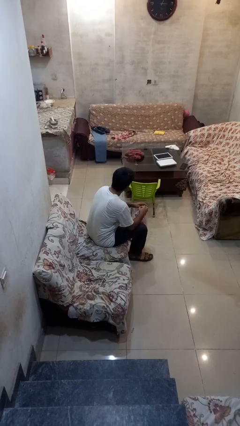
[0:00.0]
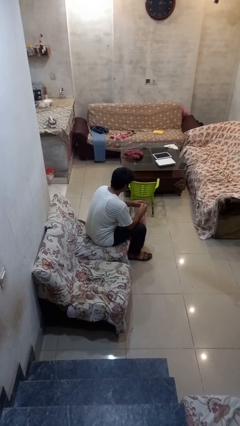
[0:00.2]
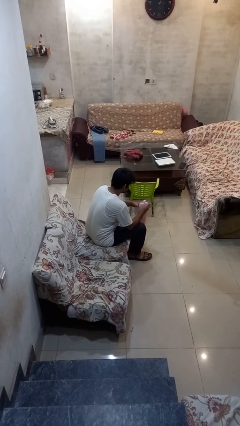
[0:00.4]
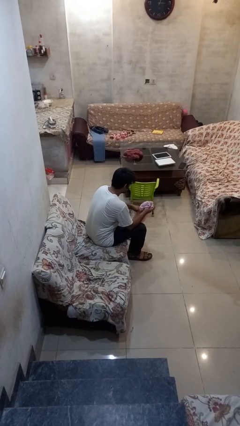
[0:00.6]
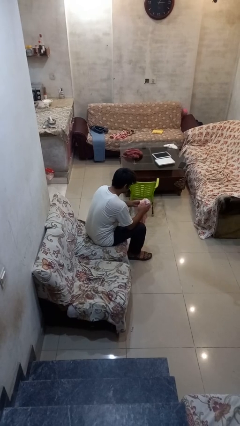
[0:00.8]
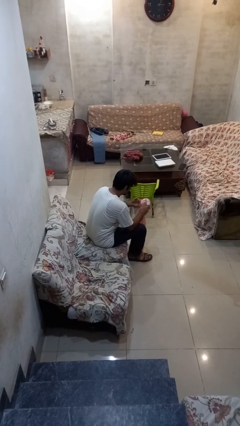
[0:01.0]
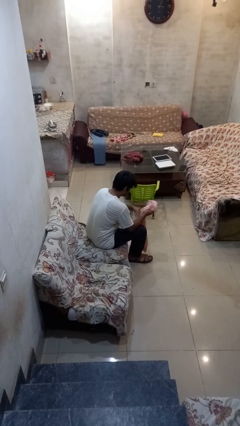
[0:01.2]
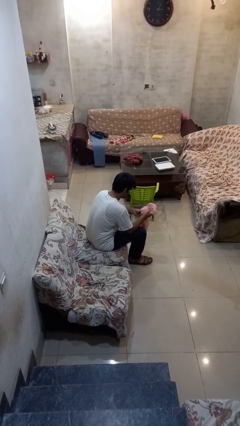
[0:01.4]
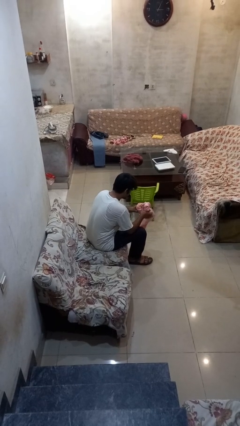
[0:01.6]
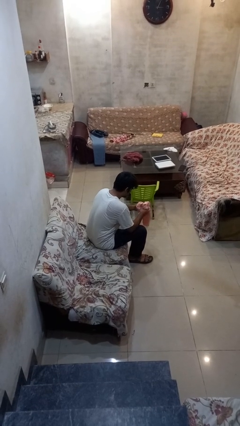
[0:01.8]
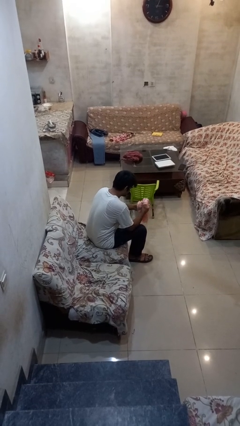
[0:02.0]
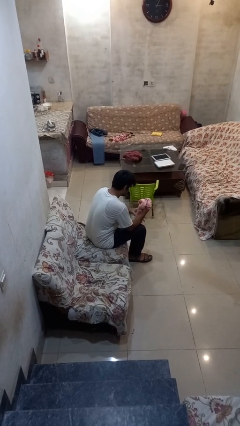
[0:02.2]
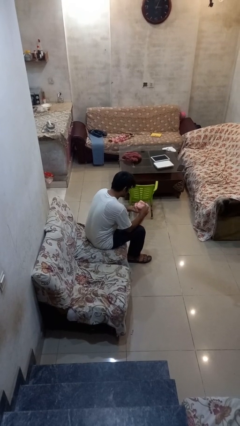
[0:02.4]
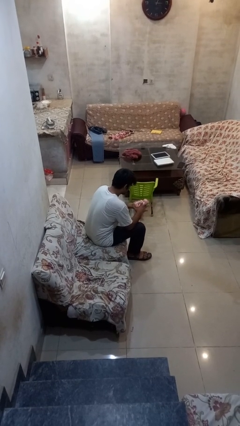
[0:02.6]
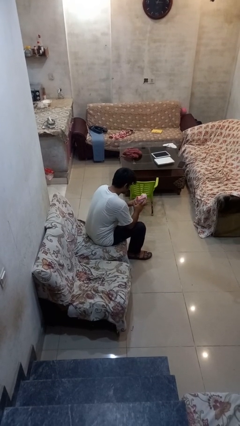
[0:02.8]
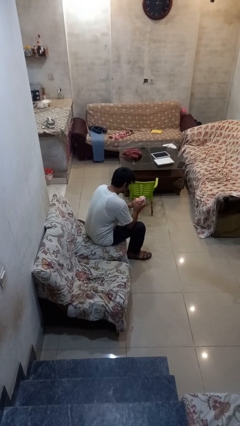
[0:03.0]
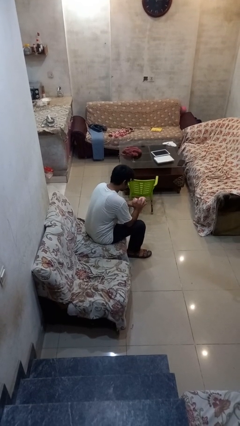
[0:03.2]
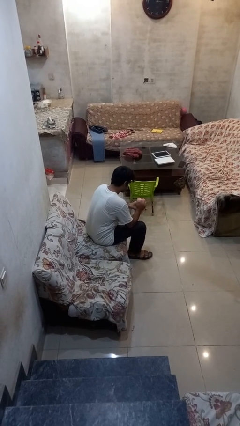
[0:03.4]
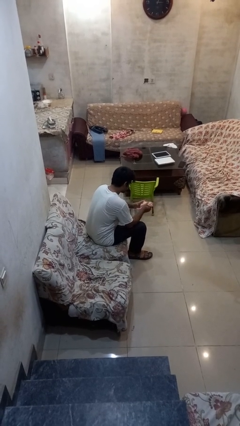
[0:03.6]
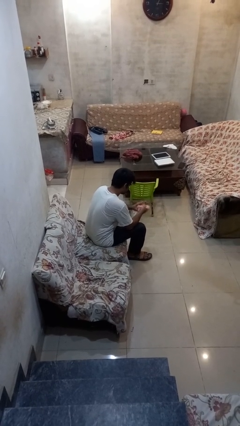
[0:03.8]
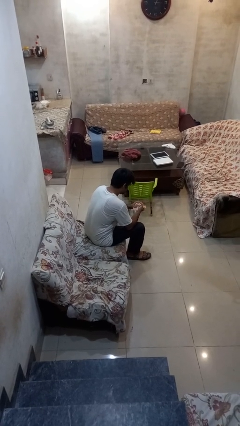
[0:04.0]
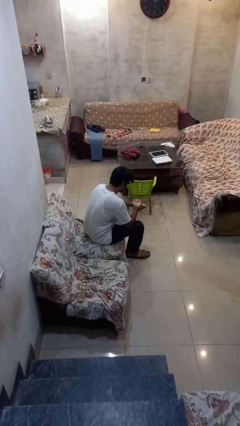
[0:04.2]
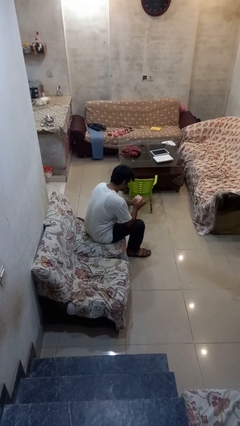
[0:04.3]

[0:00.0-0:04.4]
person squeezes object

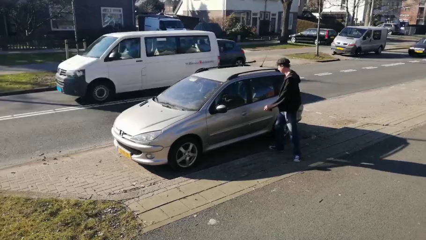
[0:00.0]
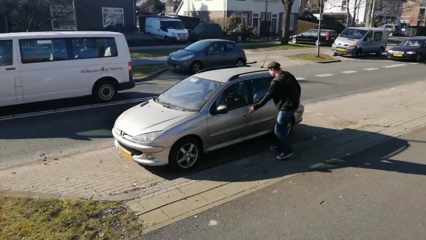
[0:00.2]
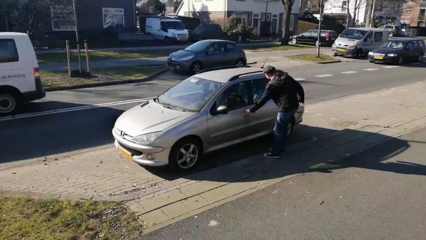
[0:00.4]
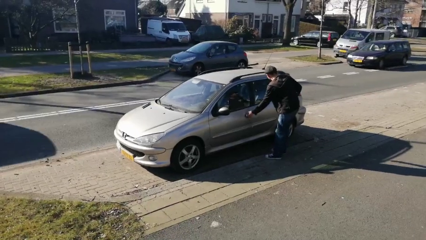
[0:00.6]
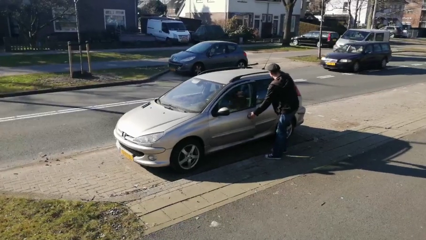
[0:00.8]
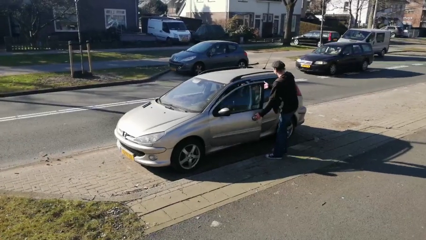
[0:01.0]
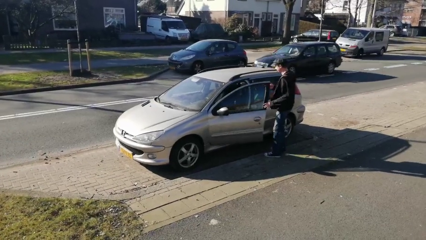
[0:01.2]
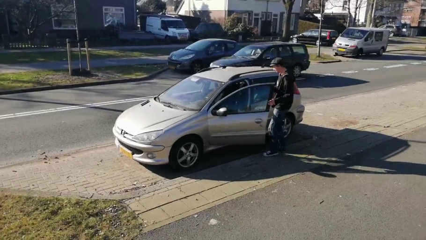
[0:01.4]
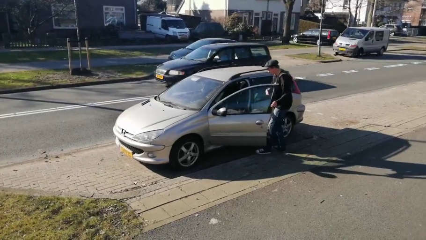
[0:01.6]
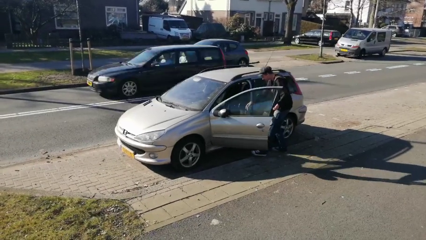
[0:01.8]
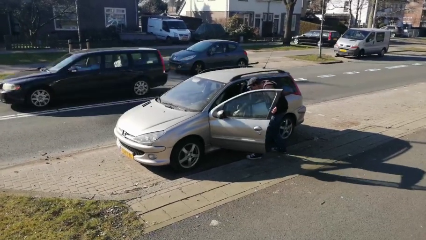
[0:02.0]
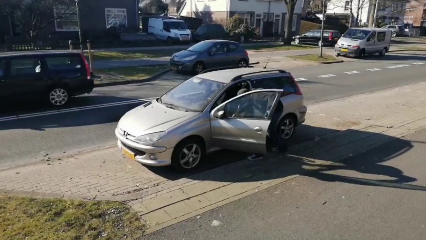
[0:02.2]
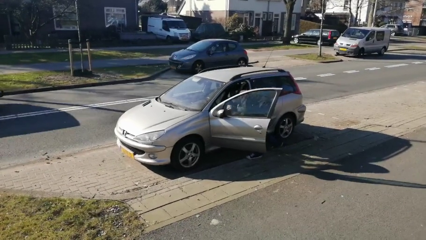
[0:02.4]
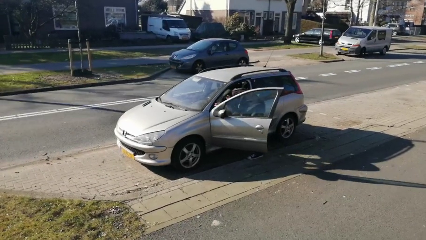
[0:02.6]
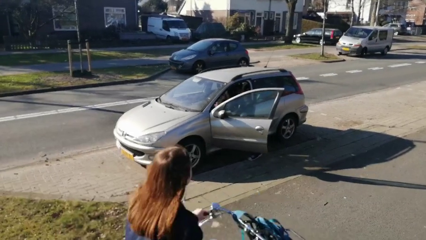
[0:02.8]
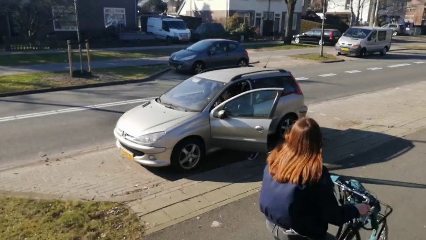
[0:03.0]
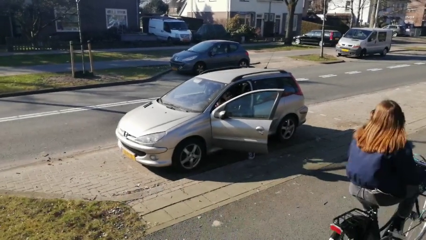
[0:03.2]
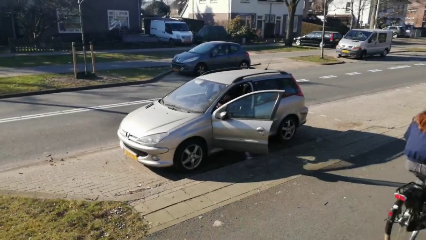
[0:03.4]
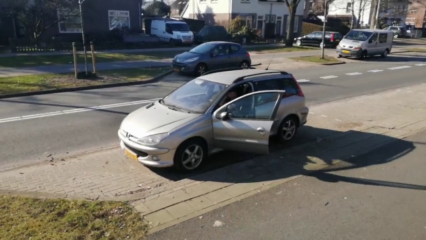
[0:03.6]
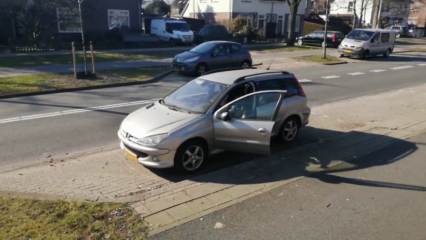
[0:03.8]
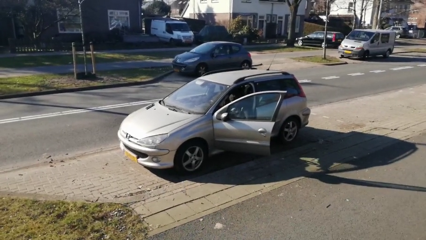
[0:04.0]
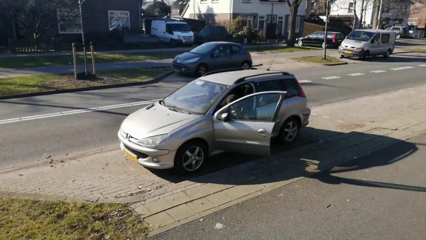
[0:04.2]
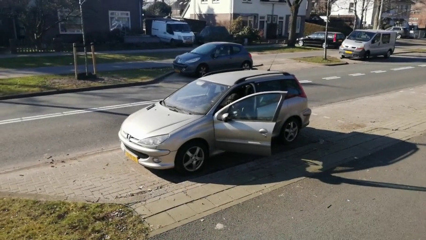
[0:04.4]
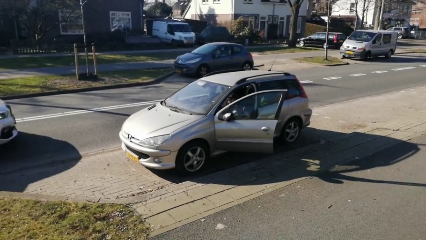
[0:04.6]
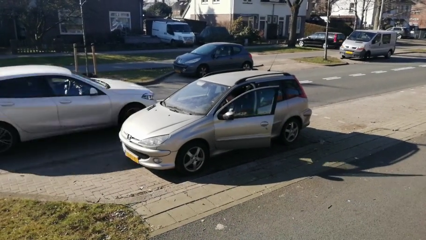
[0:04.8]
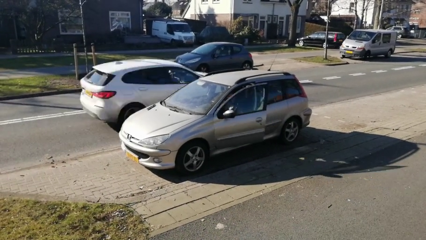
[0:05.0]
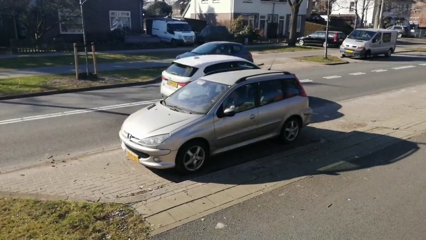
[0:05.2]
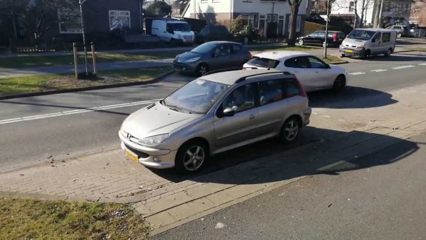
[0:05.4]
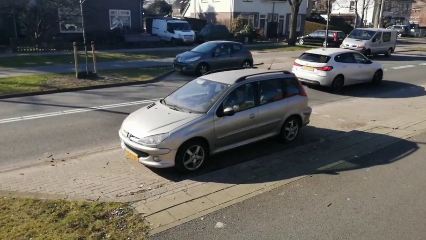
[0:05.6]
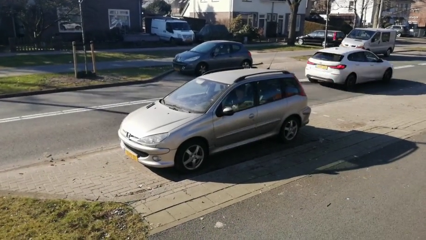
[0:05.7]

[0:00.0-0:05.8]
car picks up person

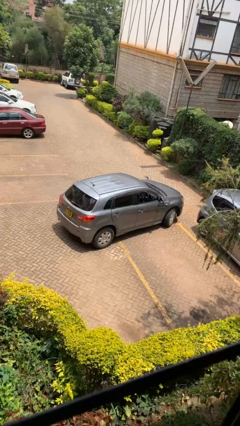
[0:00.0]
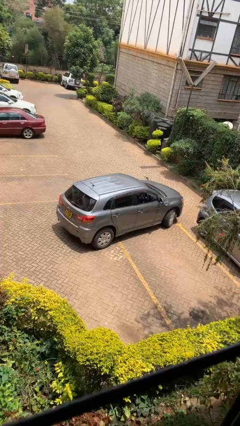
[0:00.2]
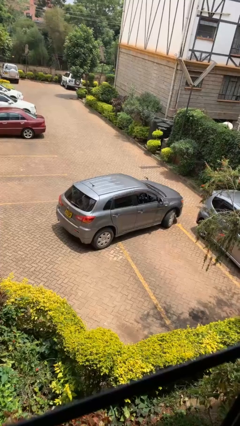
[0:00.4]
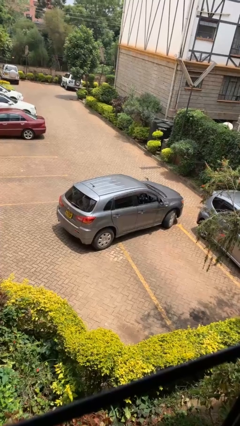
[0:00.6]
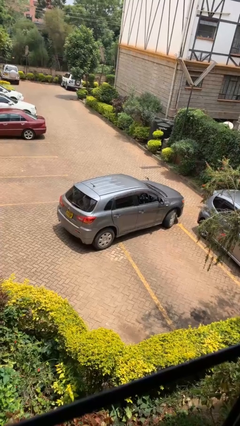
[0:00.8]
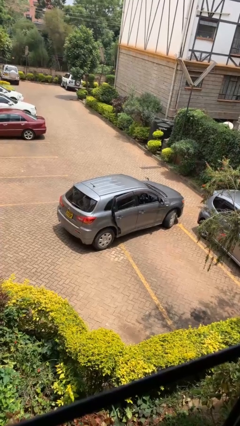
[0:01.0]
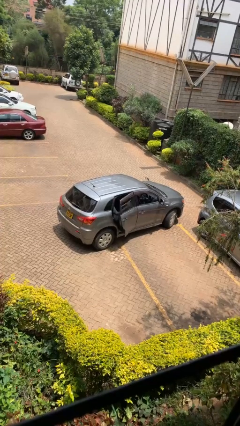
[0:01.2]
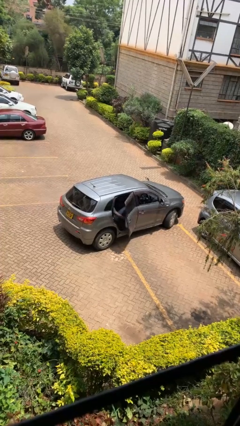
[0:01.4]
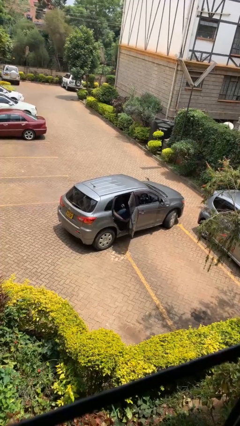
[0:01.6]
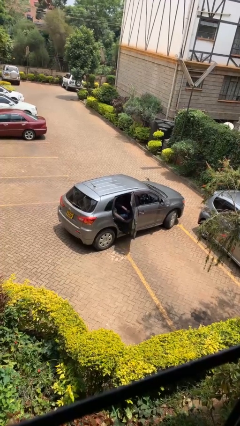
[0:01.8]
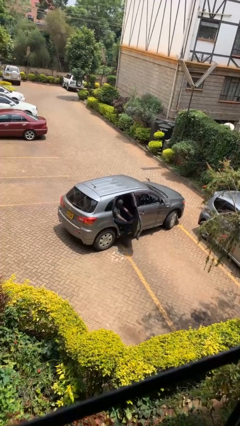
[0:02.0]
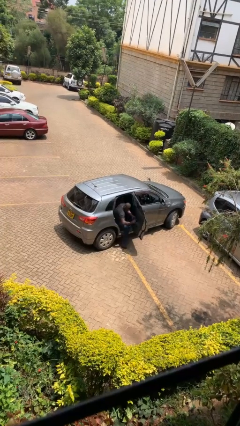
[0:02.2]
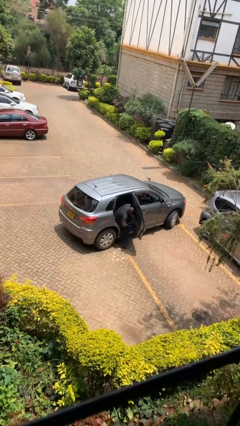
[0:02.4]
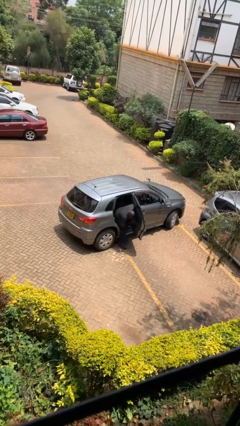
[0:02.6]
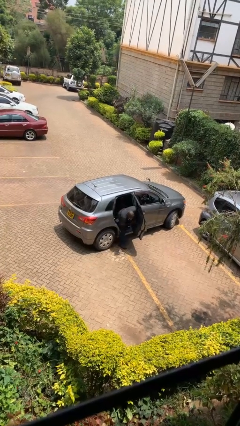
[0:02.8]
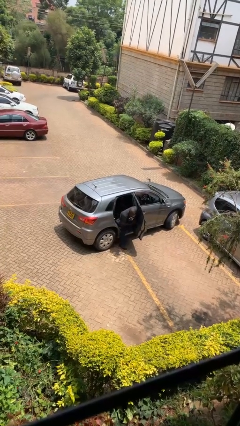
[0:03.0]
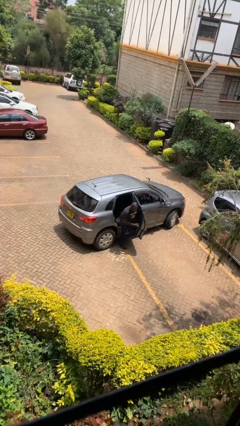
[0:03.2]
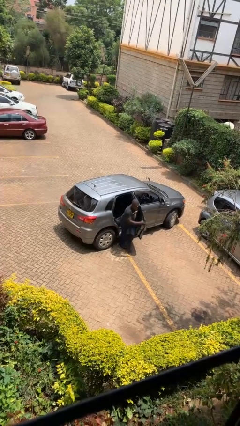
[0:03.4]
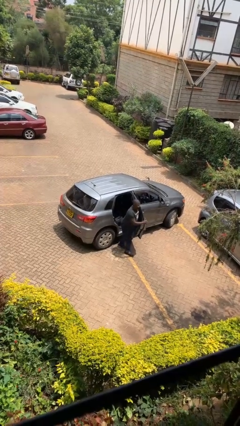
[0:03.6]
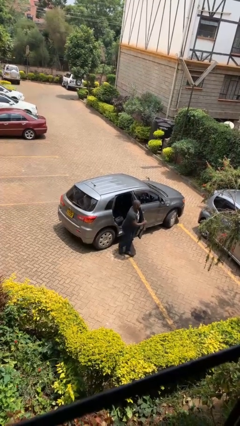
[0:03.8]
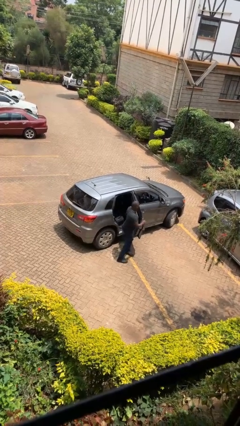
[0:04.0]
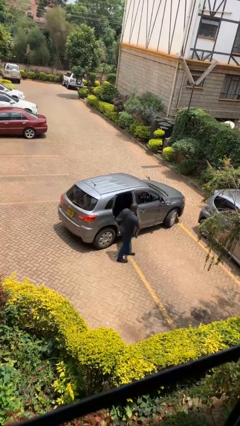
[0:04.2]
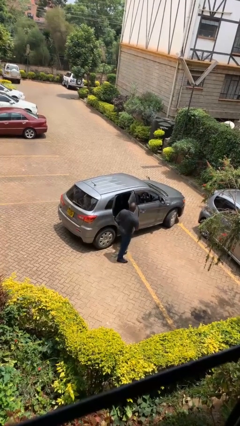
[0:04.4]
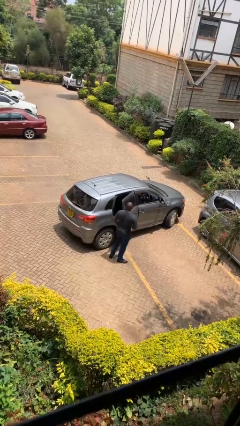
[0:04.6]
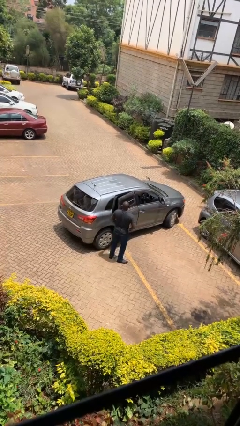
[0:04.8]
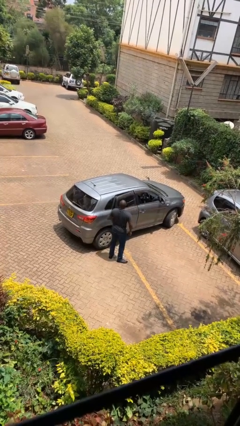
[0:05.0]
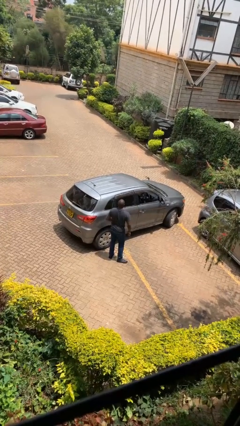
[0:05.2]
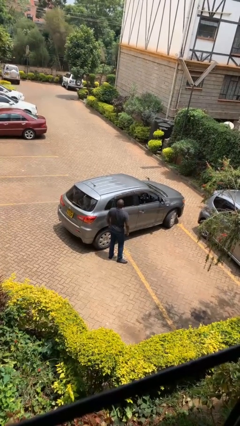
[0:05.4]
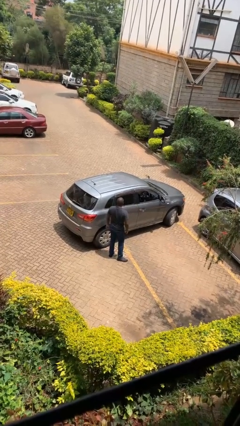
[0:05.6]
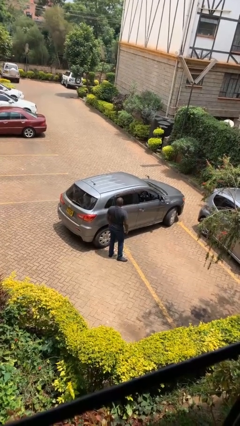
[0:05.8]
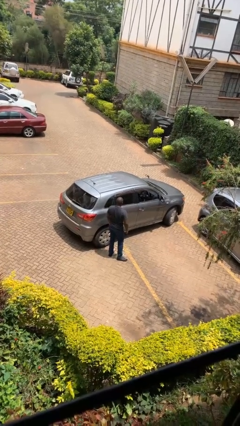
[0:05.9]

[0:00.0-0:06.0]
car drops off person

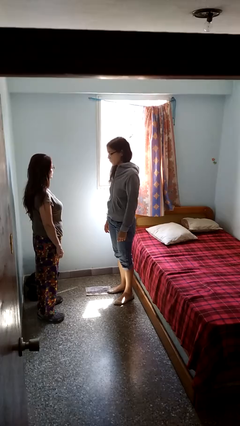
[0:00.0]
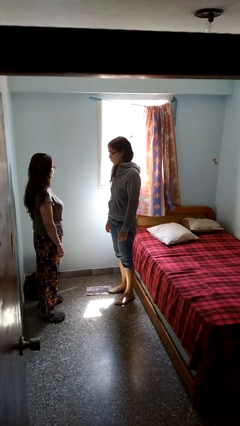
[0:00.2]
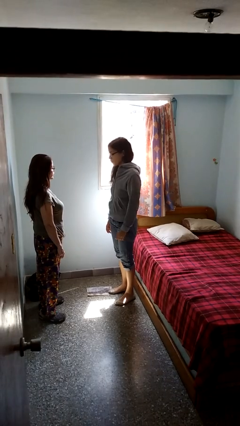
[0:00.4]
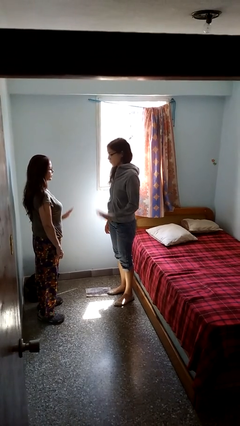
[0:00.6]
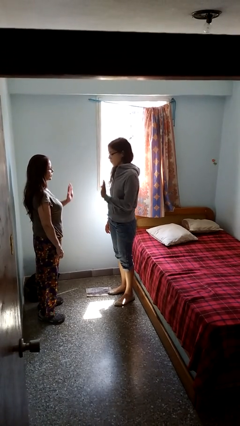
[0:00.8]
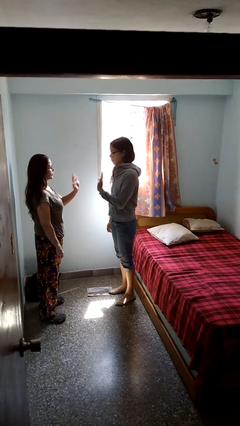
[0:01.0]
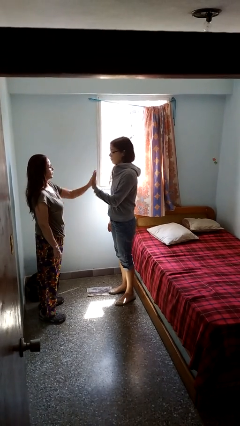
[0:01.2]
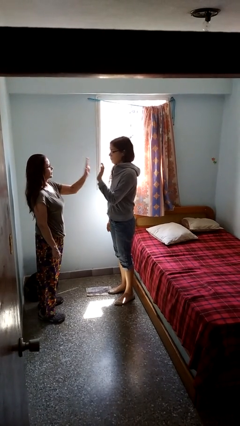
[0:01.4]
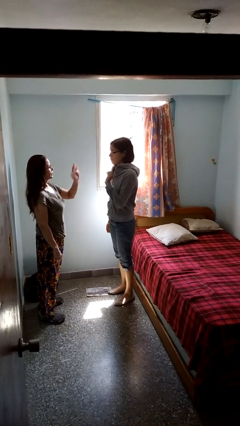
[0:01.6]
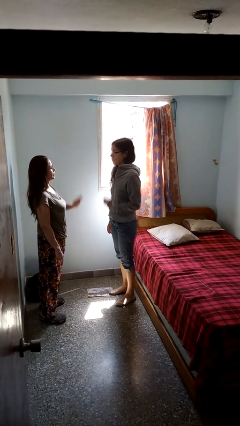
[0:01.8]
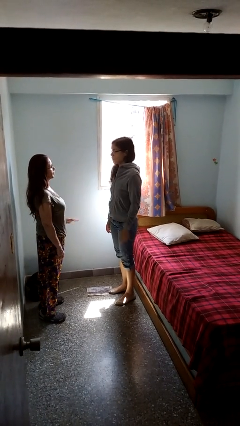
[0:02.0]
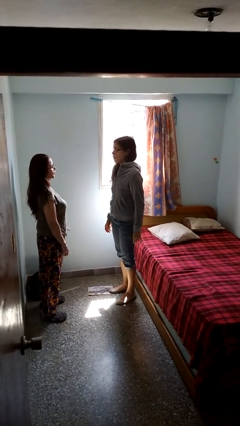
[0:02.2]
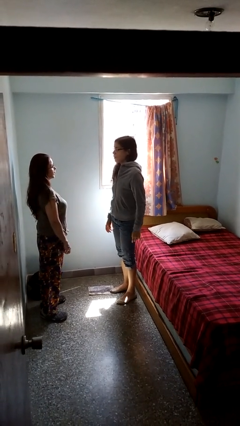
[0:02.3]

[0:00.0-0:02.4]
person highfives hand
